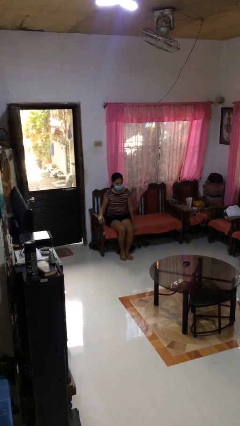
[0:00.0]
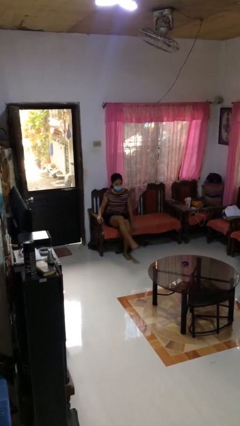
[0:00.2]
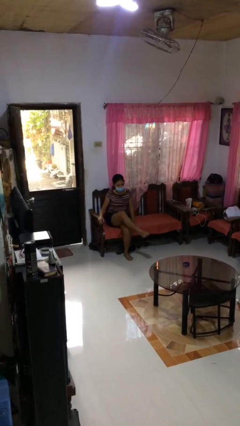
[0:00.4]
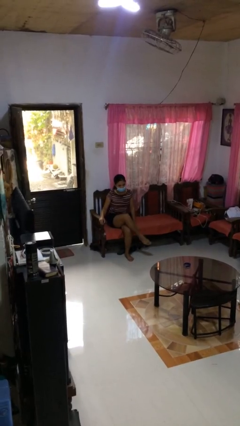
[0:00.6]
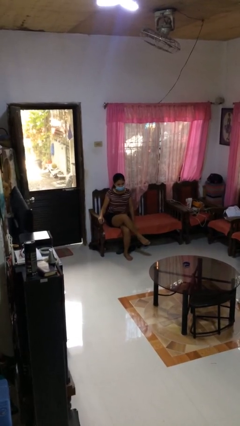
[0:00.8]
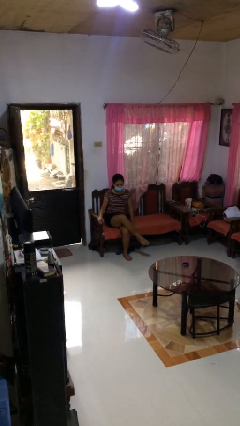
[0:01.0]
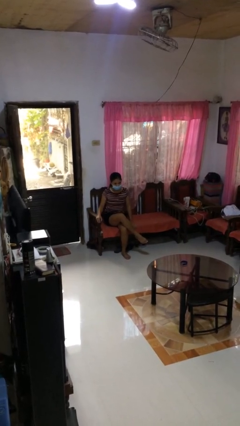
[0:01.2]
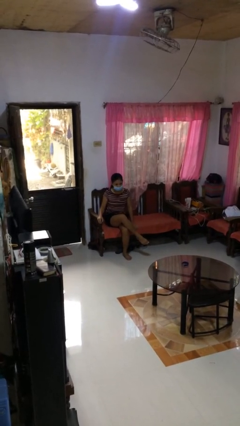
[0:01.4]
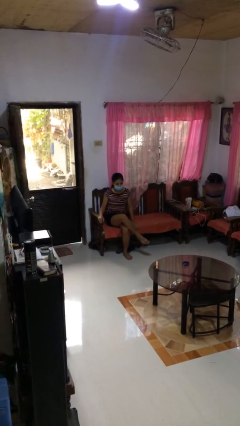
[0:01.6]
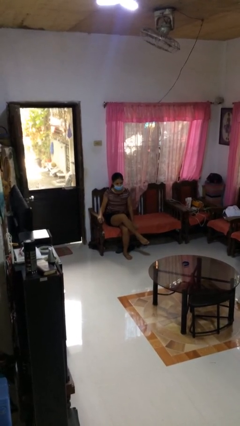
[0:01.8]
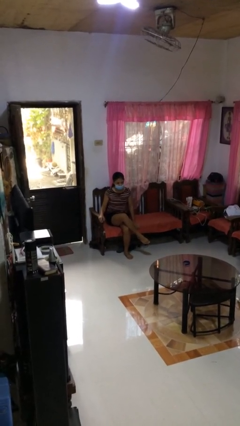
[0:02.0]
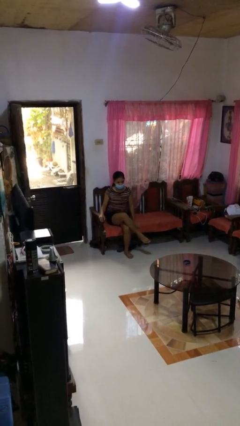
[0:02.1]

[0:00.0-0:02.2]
person crosses legs

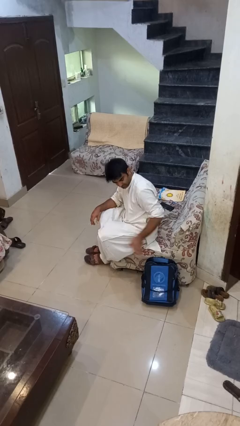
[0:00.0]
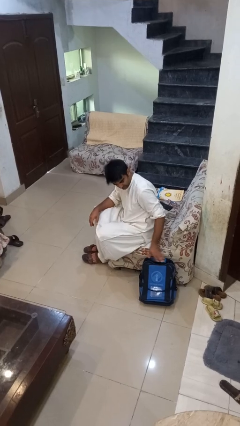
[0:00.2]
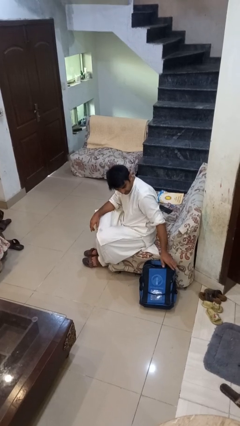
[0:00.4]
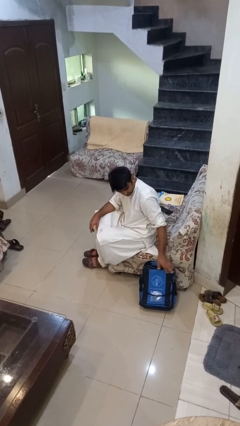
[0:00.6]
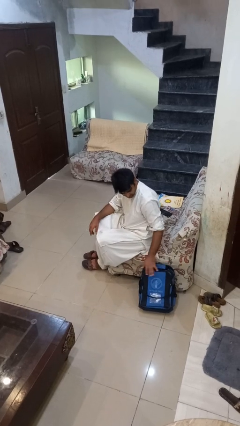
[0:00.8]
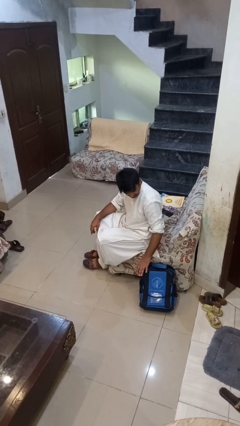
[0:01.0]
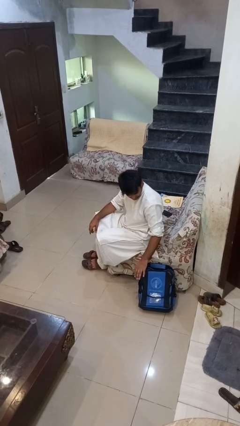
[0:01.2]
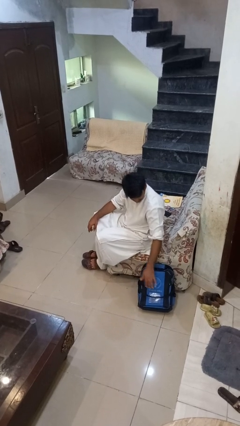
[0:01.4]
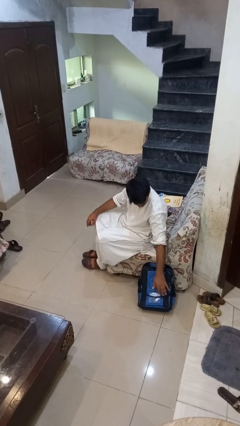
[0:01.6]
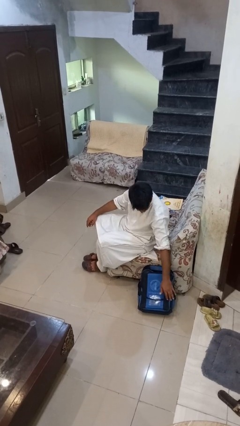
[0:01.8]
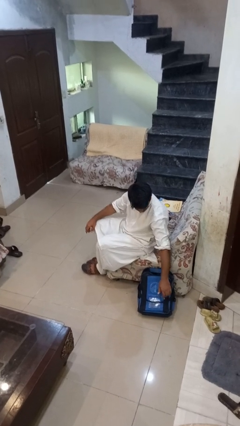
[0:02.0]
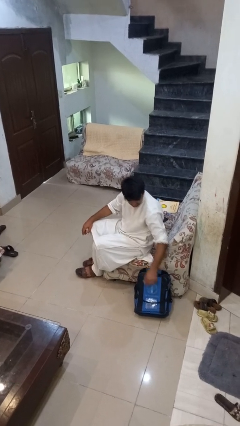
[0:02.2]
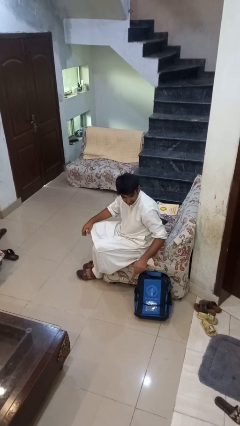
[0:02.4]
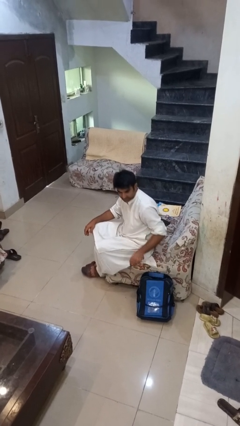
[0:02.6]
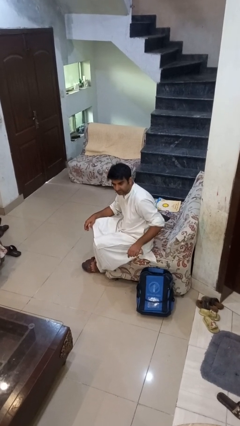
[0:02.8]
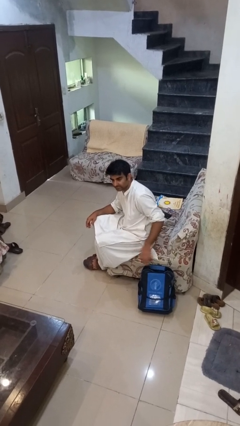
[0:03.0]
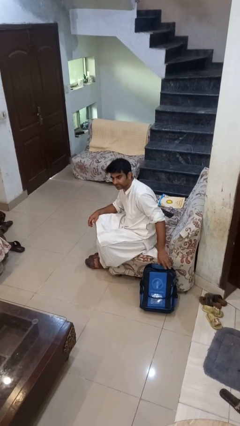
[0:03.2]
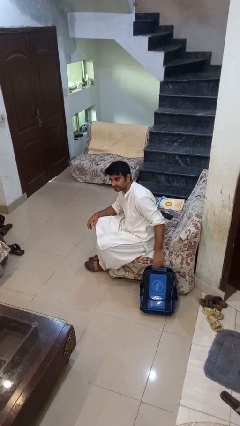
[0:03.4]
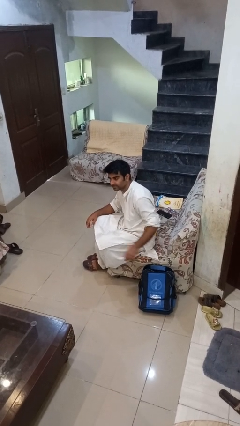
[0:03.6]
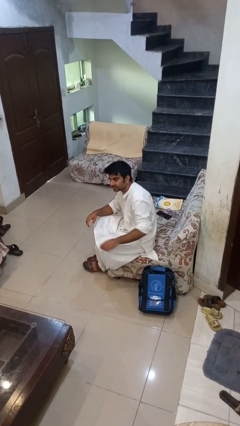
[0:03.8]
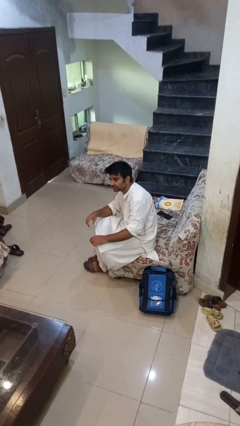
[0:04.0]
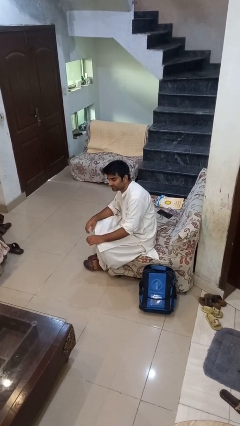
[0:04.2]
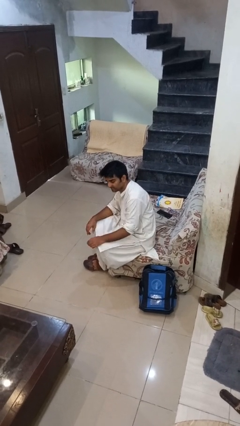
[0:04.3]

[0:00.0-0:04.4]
person waves hand over object

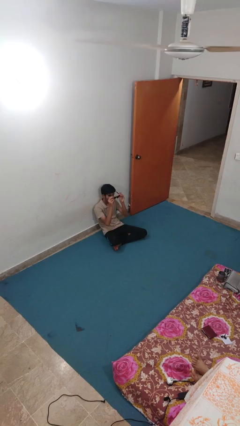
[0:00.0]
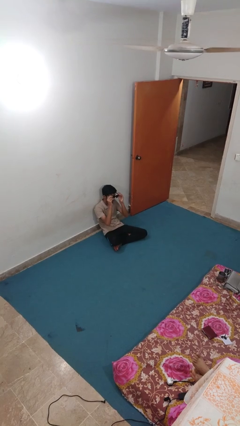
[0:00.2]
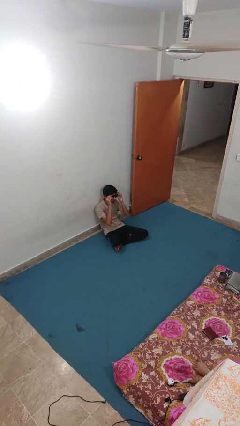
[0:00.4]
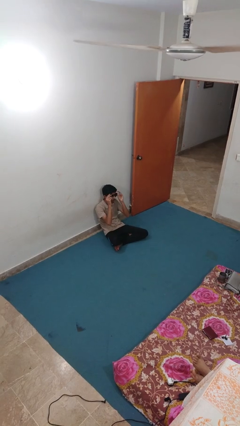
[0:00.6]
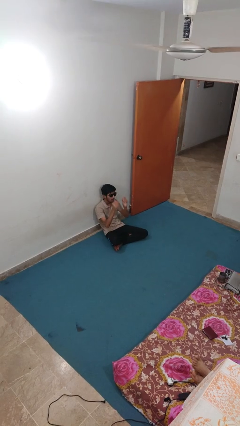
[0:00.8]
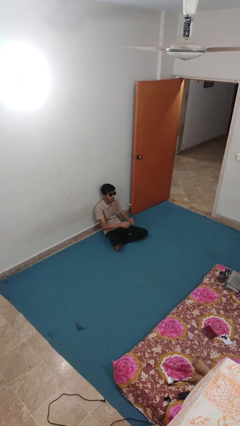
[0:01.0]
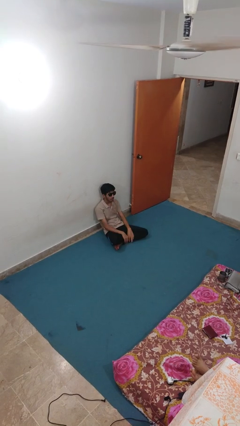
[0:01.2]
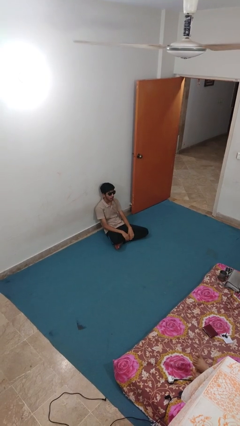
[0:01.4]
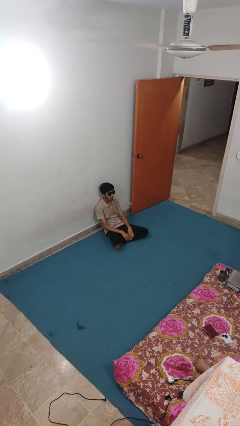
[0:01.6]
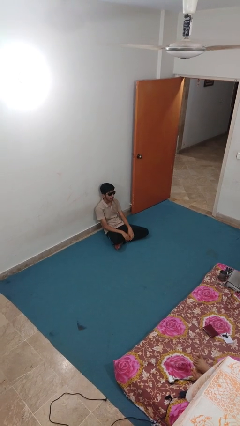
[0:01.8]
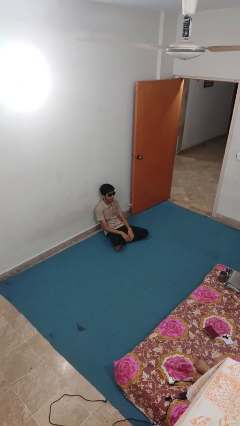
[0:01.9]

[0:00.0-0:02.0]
person puts on sunglasses

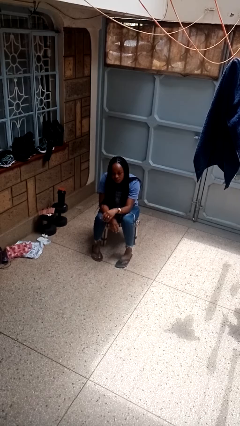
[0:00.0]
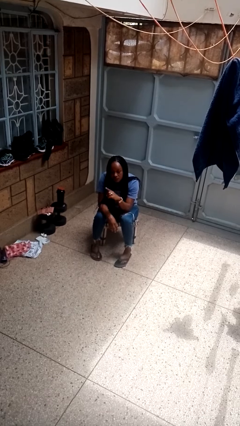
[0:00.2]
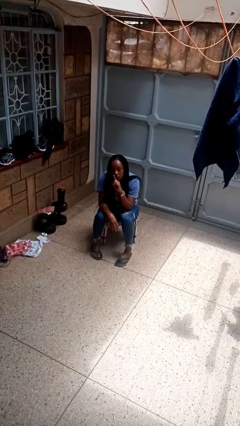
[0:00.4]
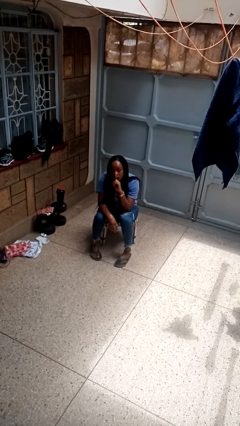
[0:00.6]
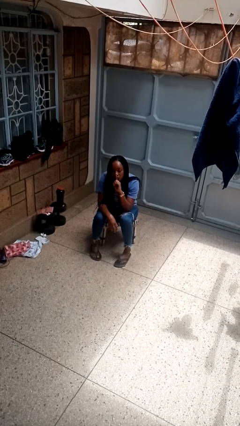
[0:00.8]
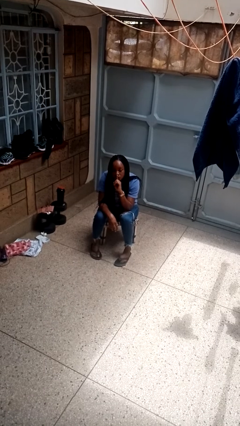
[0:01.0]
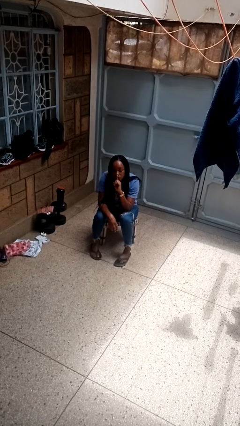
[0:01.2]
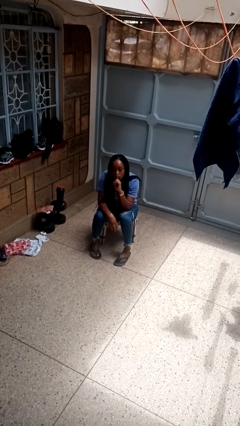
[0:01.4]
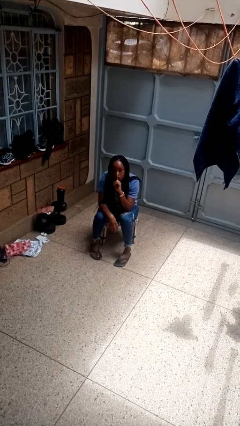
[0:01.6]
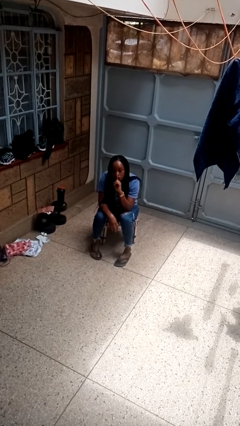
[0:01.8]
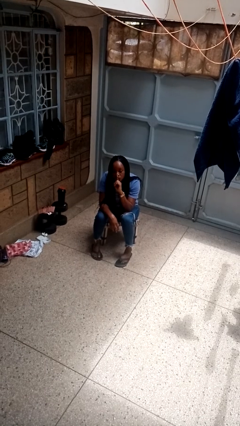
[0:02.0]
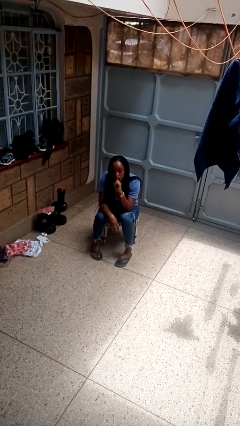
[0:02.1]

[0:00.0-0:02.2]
person gestures be quiet

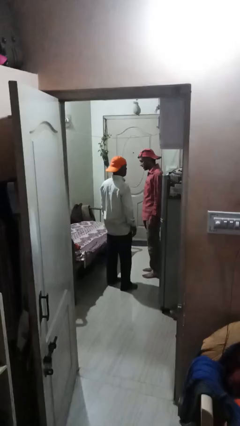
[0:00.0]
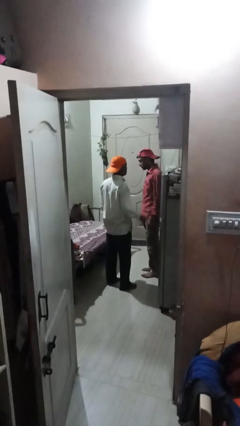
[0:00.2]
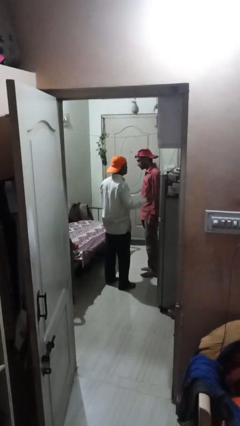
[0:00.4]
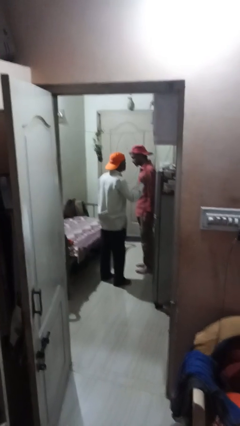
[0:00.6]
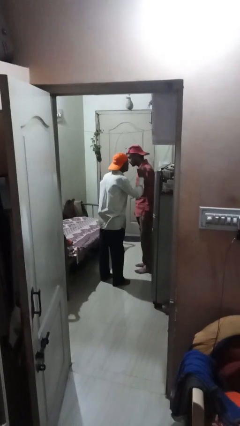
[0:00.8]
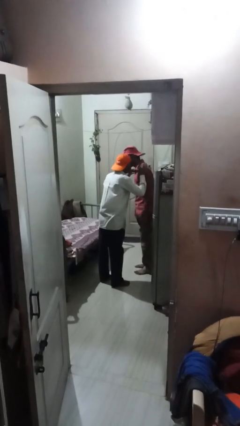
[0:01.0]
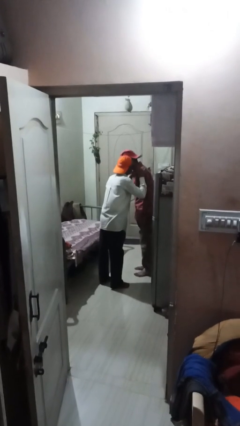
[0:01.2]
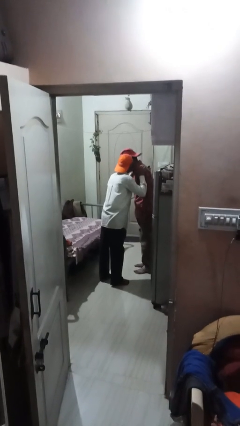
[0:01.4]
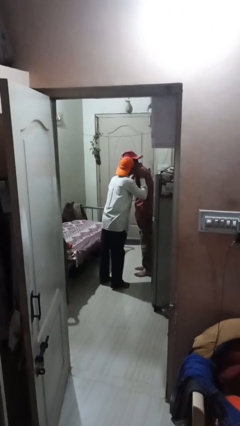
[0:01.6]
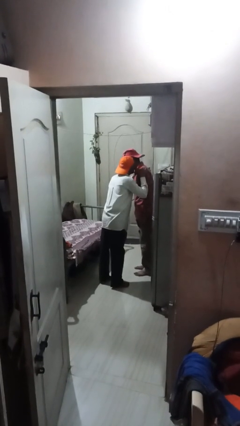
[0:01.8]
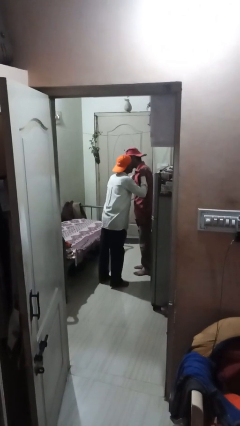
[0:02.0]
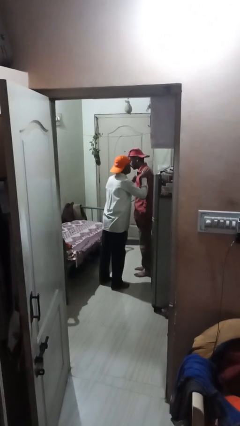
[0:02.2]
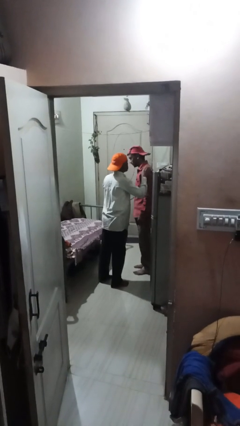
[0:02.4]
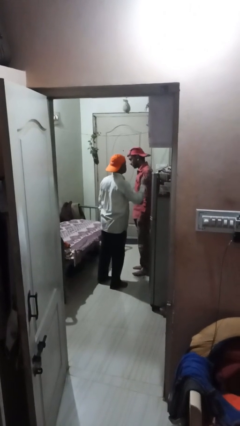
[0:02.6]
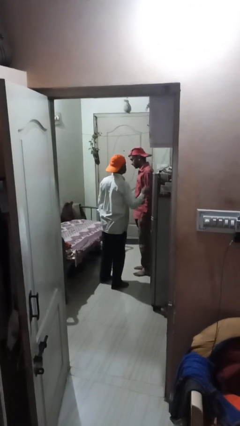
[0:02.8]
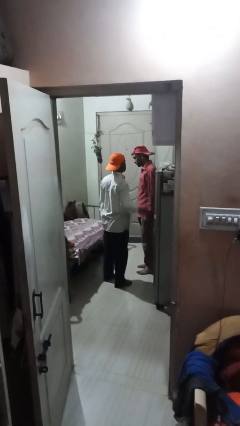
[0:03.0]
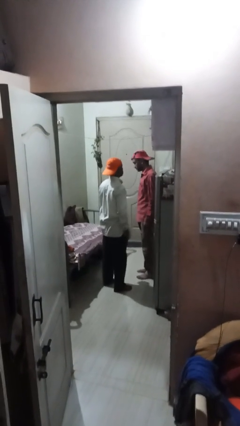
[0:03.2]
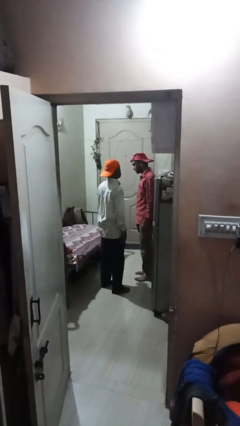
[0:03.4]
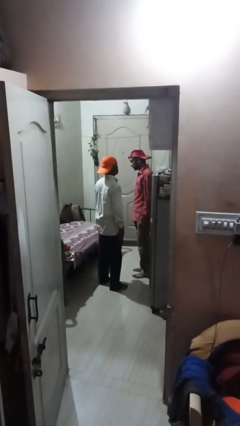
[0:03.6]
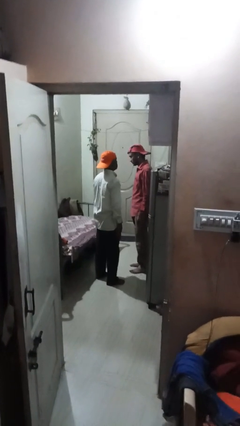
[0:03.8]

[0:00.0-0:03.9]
person kisses cheek of person

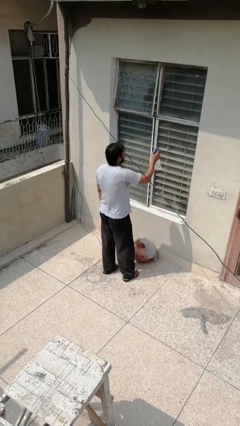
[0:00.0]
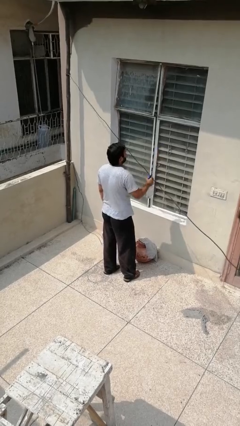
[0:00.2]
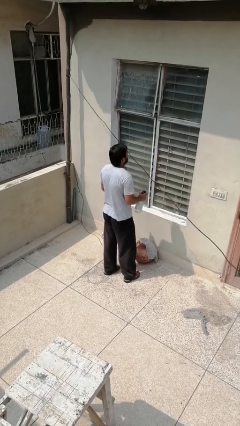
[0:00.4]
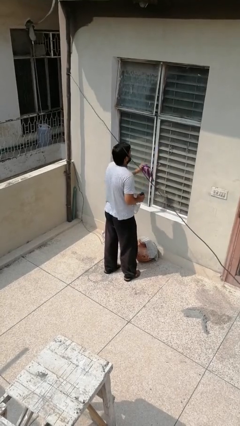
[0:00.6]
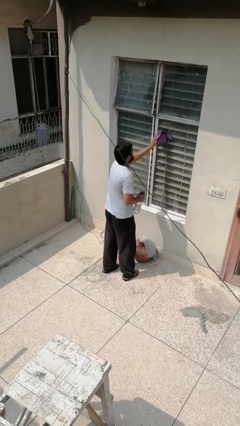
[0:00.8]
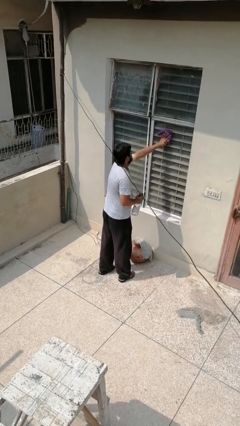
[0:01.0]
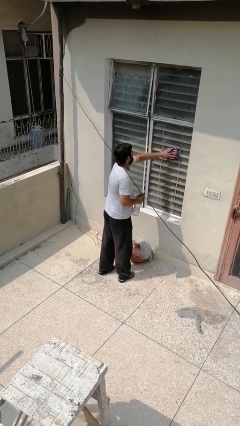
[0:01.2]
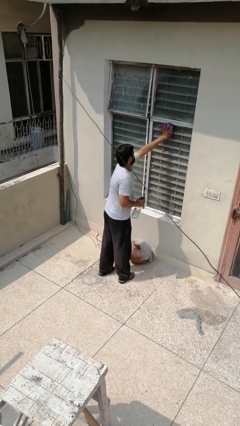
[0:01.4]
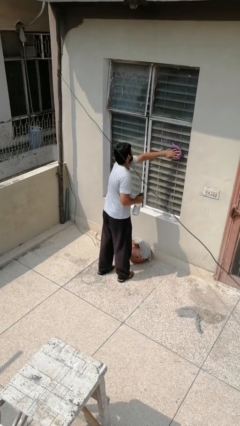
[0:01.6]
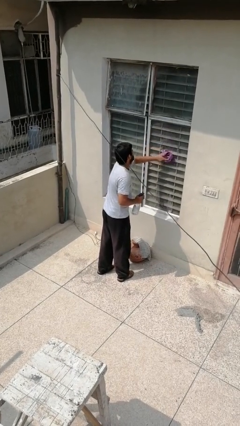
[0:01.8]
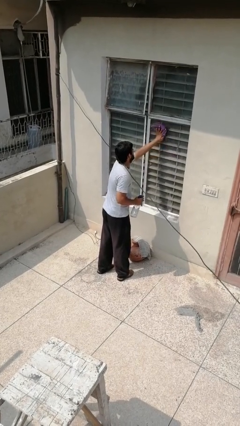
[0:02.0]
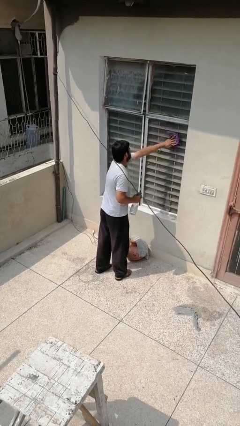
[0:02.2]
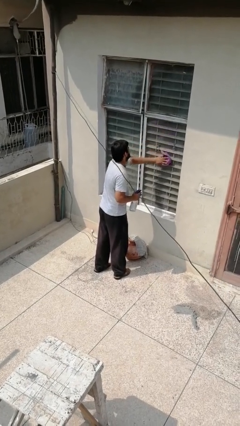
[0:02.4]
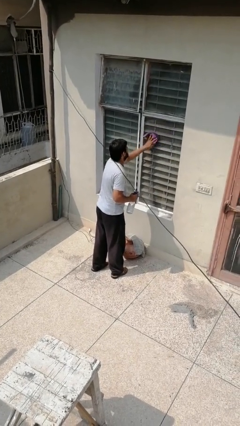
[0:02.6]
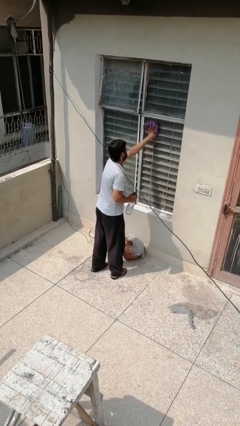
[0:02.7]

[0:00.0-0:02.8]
person washes window
